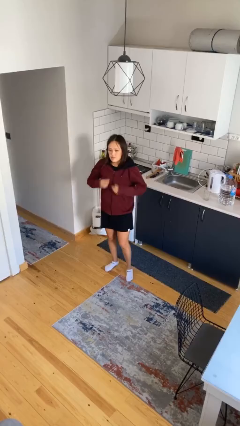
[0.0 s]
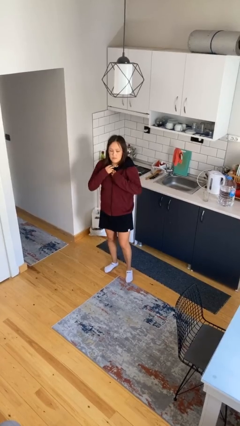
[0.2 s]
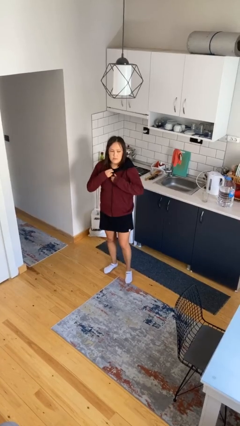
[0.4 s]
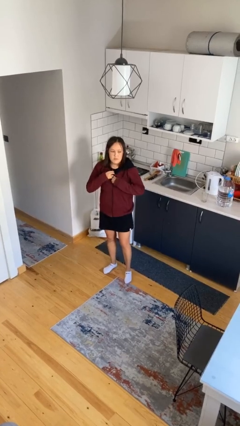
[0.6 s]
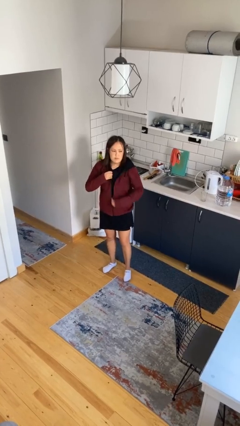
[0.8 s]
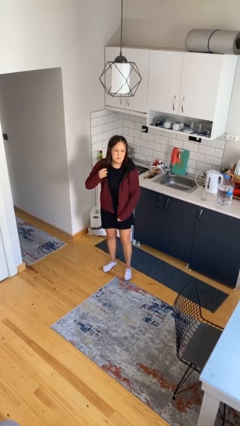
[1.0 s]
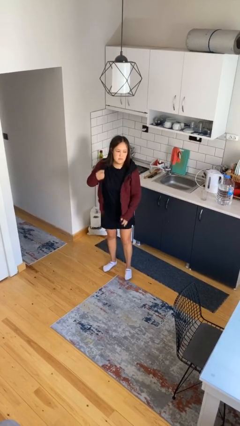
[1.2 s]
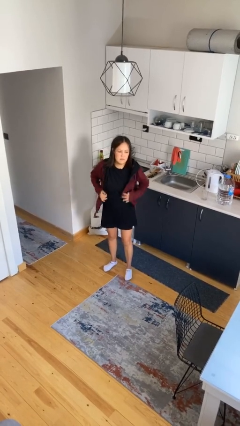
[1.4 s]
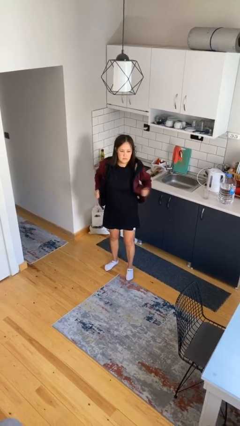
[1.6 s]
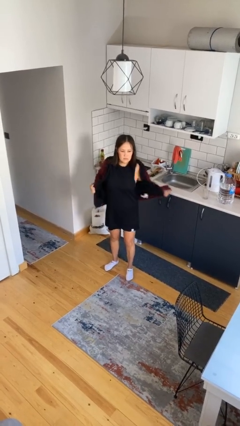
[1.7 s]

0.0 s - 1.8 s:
person unzips jacket

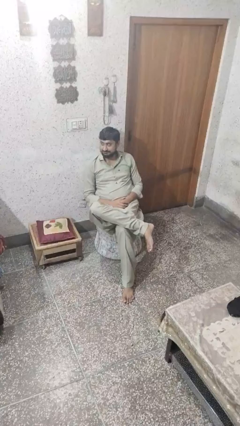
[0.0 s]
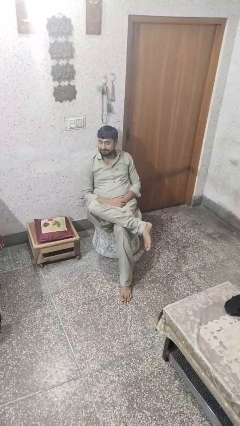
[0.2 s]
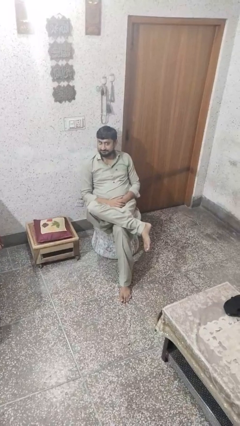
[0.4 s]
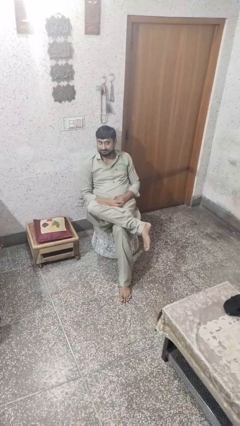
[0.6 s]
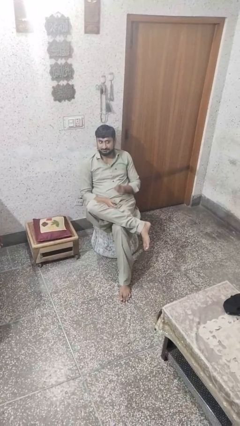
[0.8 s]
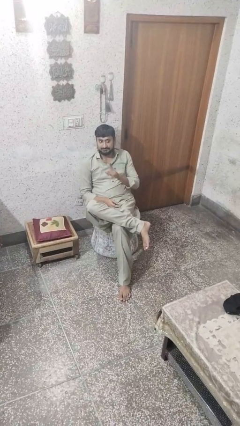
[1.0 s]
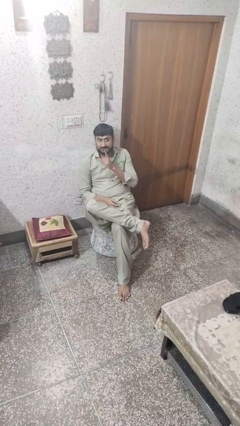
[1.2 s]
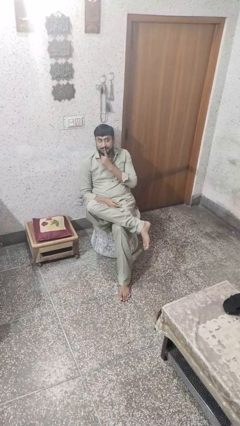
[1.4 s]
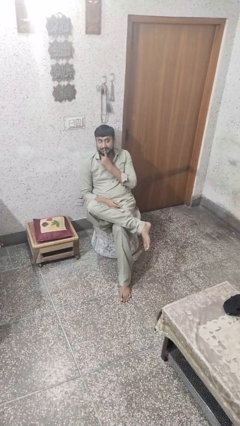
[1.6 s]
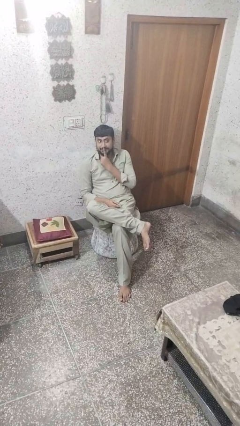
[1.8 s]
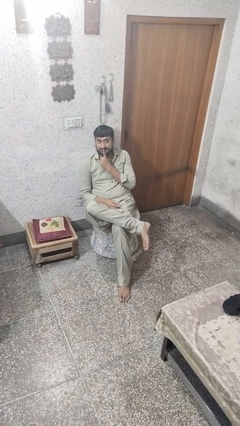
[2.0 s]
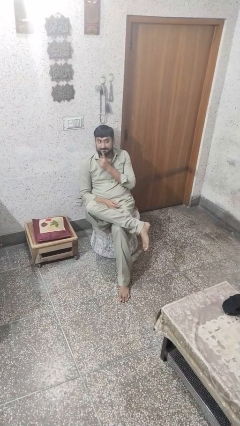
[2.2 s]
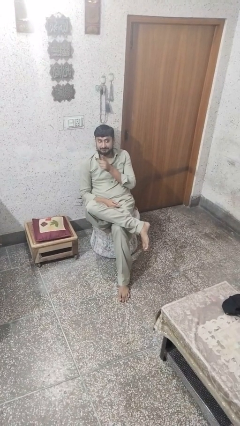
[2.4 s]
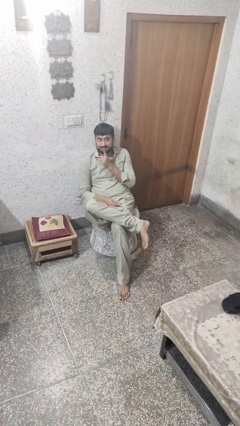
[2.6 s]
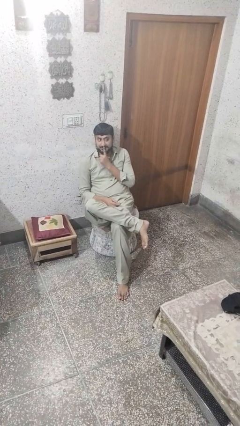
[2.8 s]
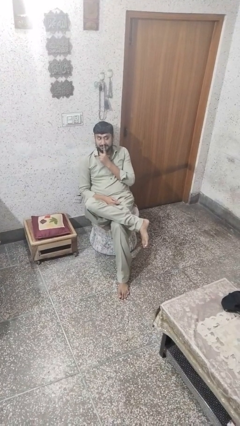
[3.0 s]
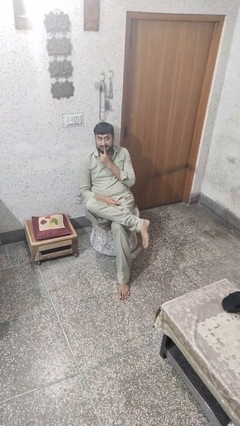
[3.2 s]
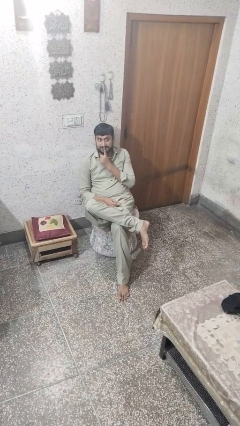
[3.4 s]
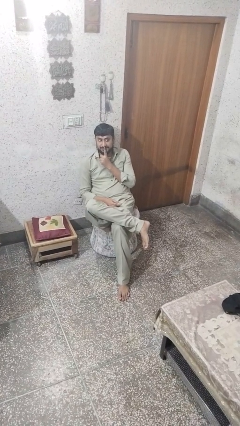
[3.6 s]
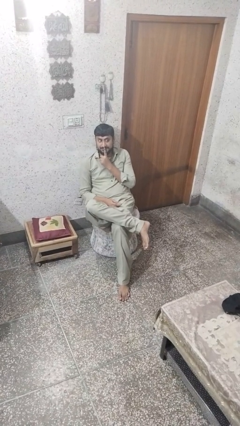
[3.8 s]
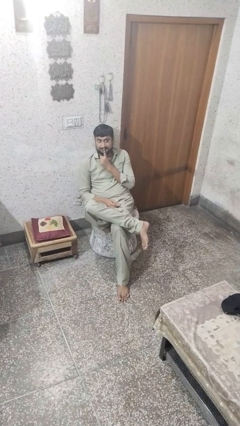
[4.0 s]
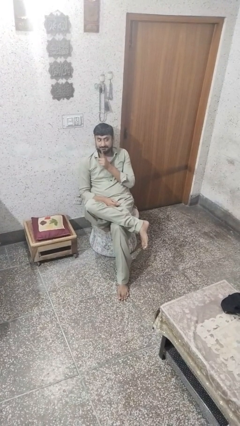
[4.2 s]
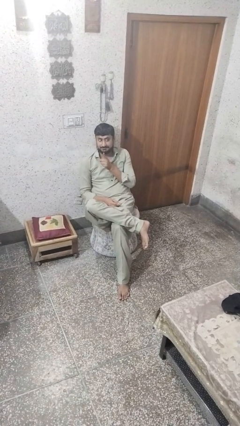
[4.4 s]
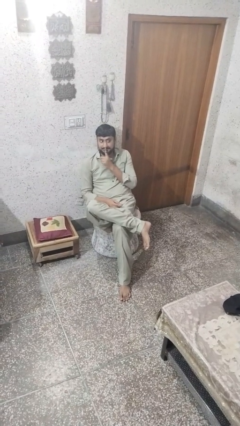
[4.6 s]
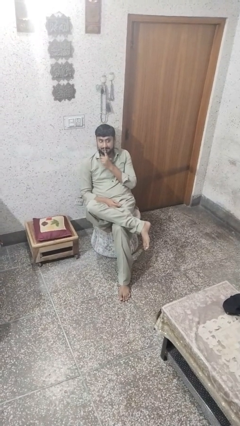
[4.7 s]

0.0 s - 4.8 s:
person gestures be quiet

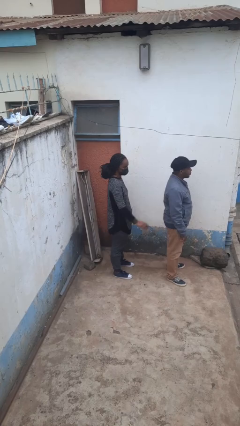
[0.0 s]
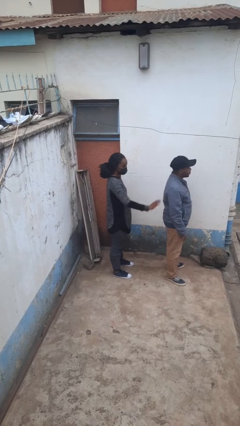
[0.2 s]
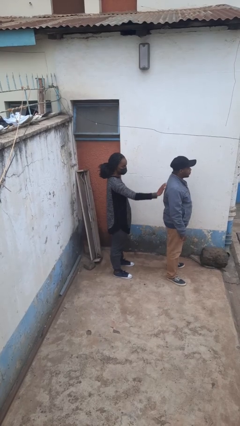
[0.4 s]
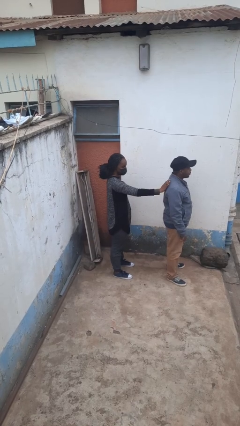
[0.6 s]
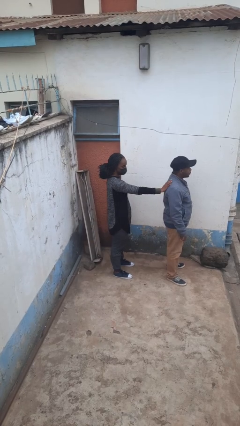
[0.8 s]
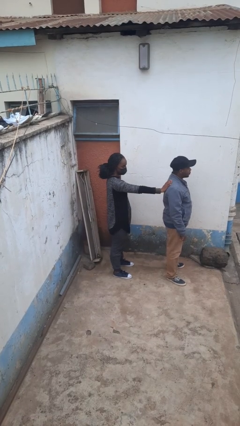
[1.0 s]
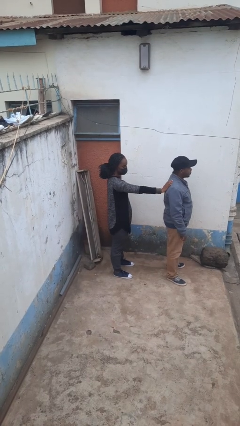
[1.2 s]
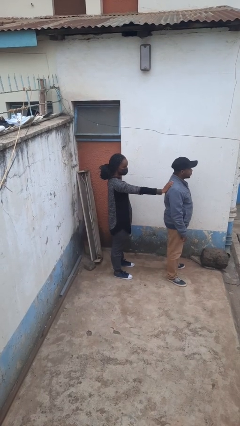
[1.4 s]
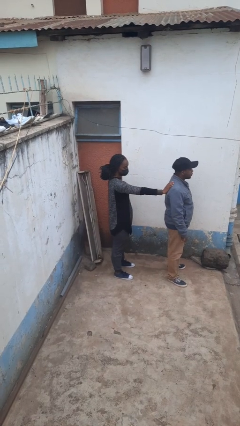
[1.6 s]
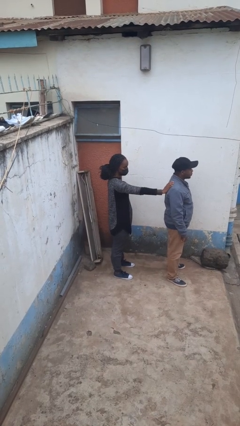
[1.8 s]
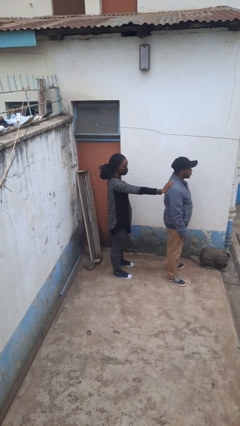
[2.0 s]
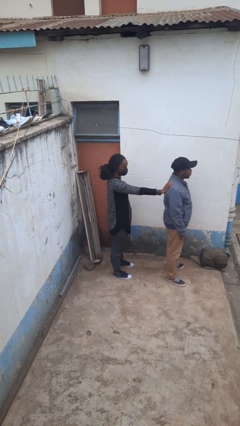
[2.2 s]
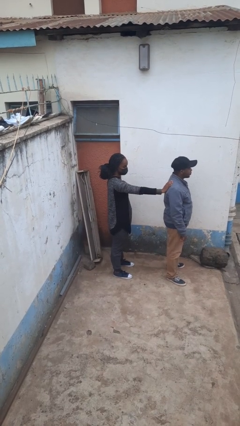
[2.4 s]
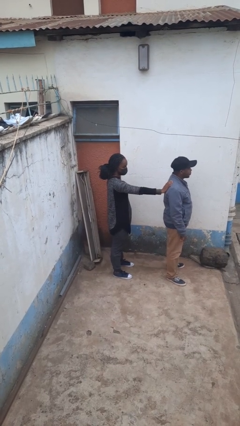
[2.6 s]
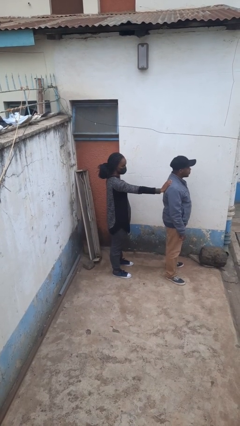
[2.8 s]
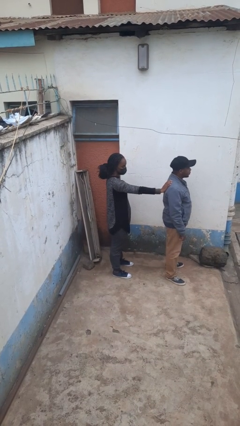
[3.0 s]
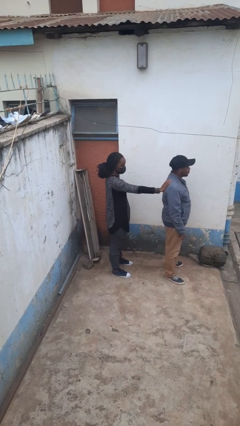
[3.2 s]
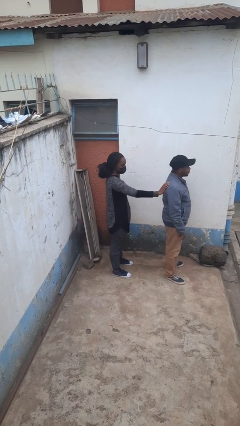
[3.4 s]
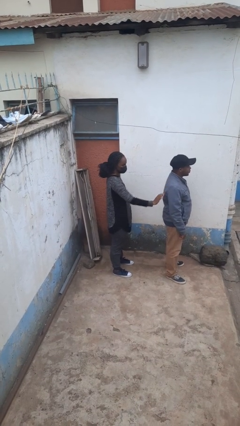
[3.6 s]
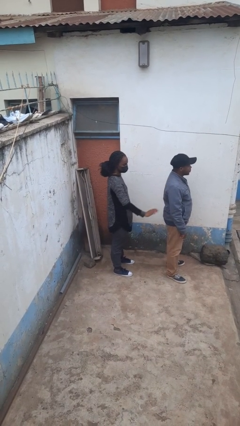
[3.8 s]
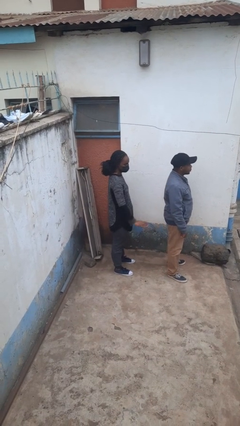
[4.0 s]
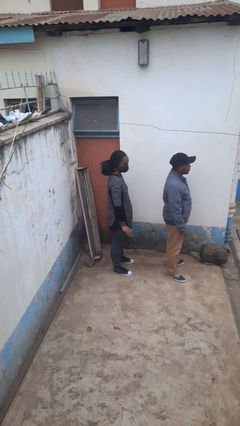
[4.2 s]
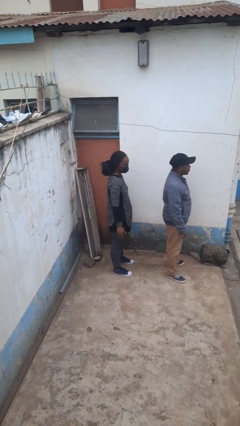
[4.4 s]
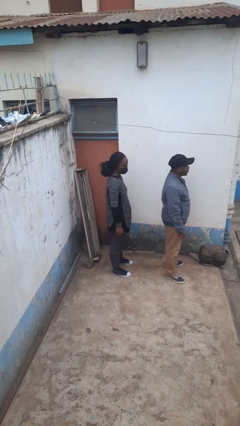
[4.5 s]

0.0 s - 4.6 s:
person touches back of person

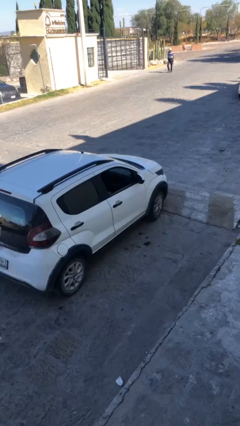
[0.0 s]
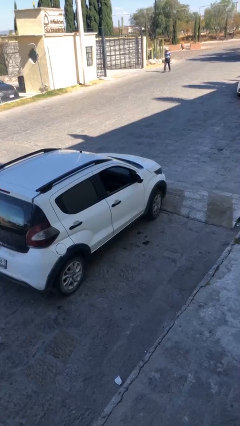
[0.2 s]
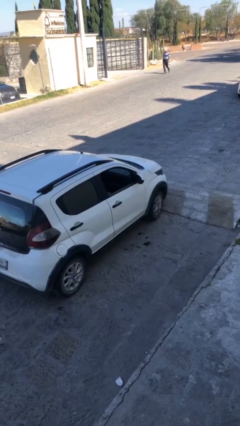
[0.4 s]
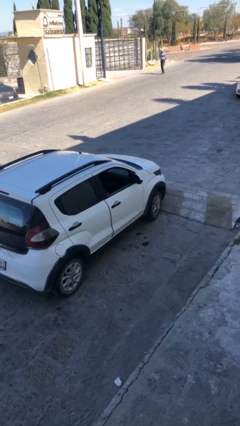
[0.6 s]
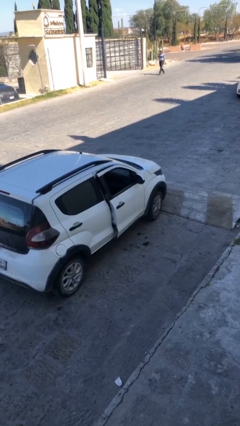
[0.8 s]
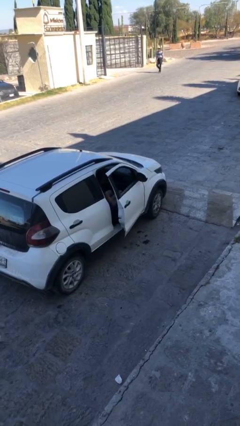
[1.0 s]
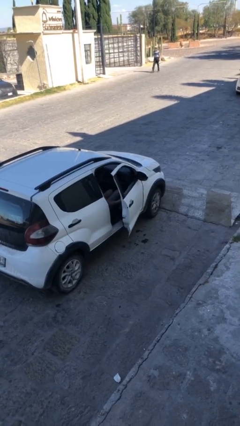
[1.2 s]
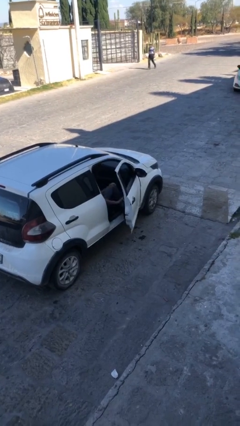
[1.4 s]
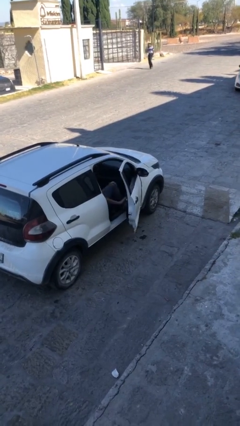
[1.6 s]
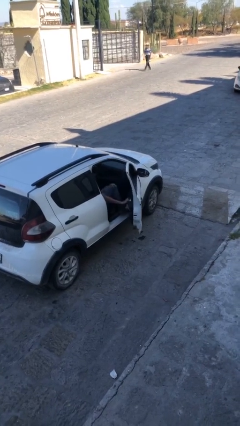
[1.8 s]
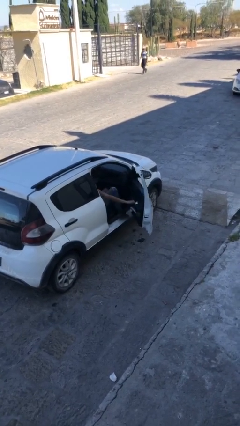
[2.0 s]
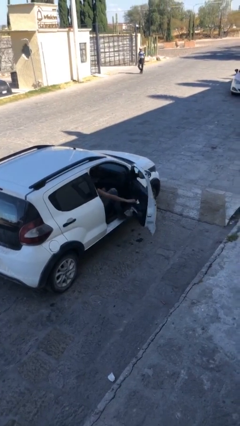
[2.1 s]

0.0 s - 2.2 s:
person opens car door

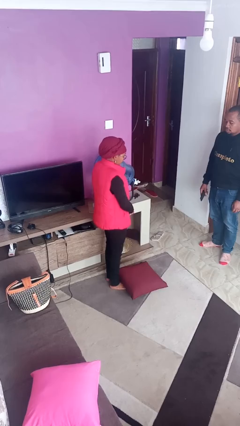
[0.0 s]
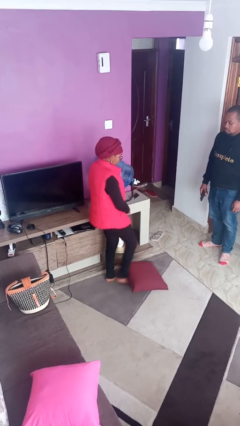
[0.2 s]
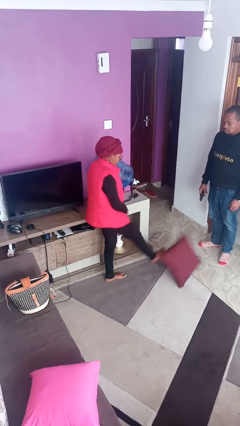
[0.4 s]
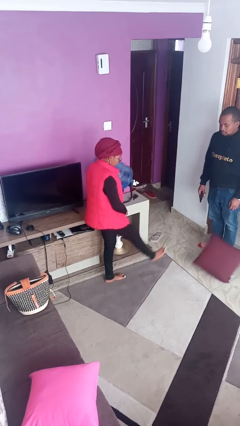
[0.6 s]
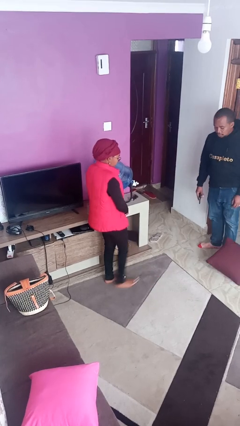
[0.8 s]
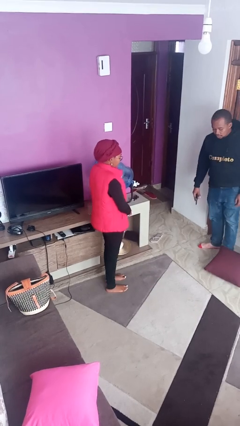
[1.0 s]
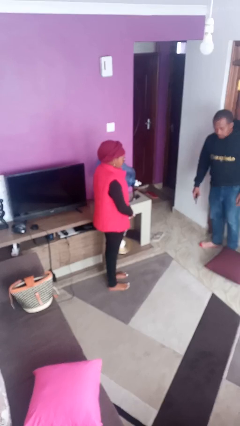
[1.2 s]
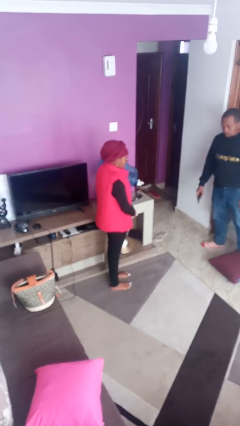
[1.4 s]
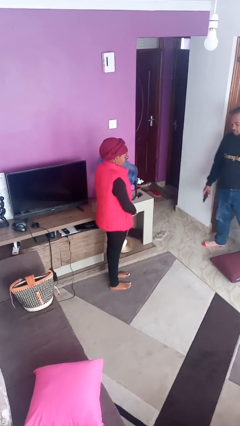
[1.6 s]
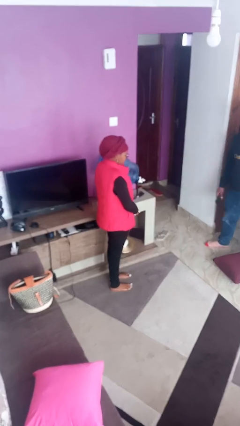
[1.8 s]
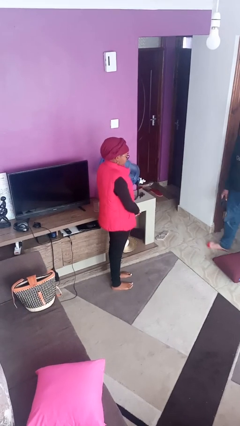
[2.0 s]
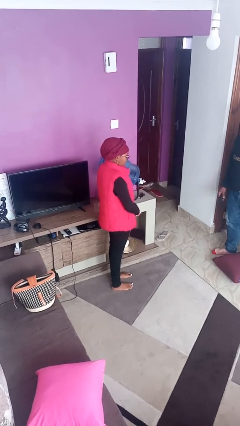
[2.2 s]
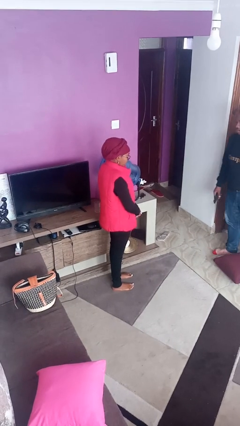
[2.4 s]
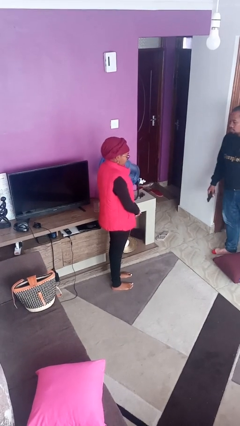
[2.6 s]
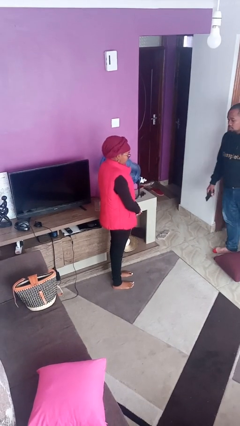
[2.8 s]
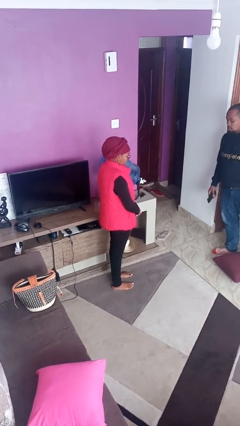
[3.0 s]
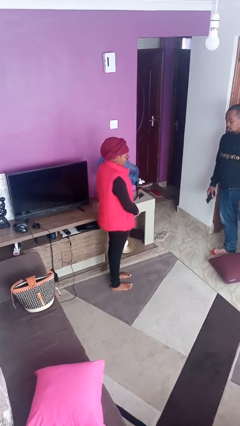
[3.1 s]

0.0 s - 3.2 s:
person kicks object to person

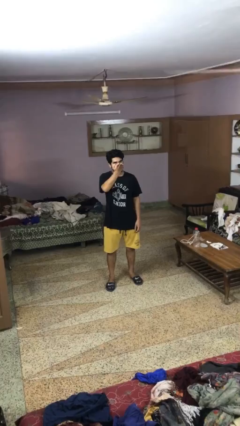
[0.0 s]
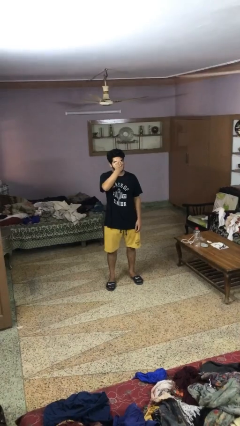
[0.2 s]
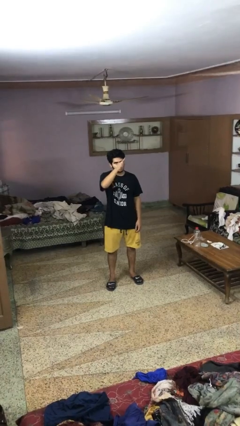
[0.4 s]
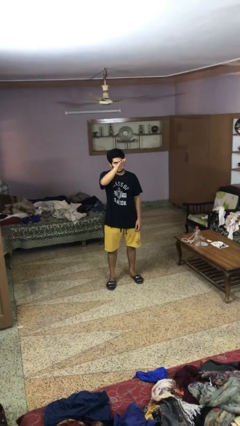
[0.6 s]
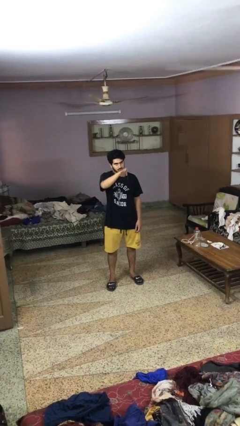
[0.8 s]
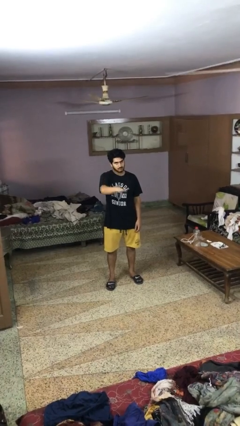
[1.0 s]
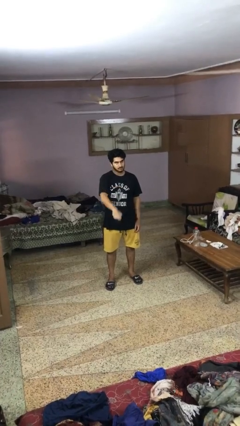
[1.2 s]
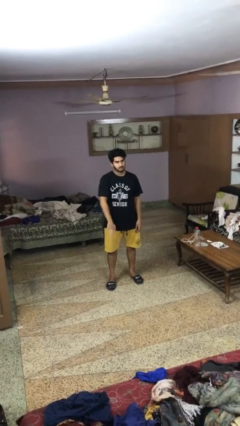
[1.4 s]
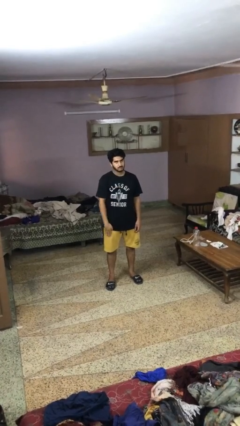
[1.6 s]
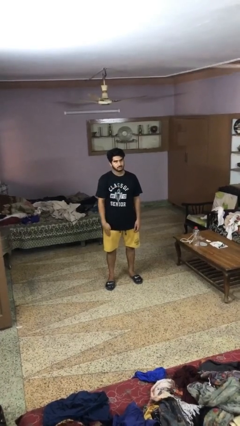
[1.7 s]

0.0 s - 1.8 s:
person gestures swipe down
